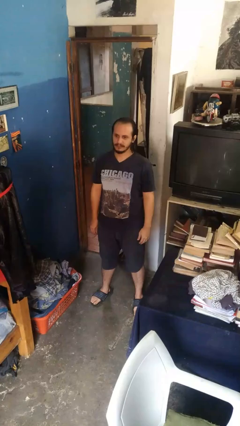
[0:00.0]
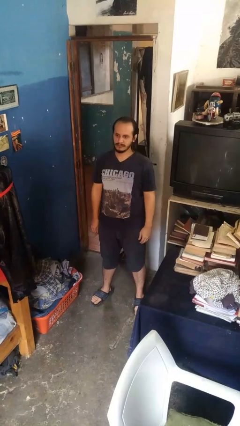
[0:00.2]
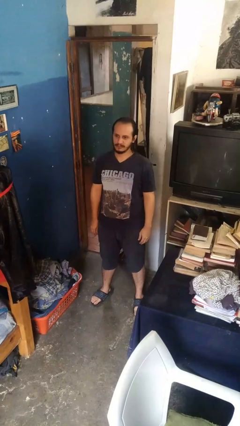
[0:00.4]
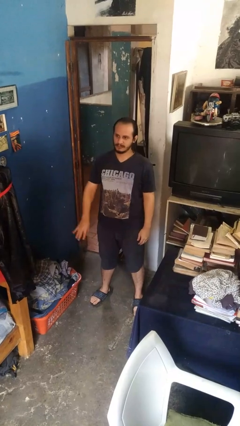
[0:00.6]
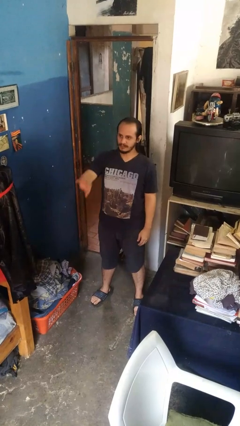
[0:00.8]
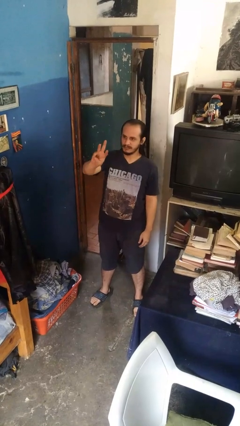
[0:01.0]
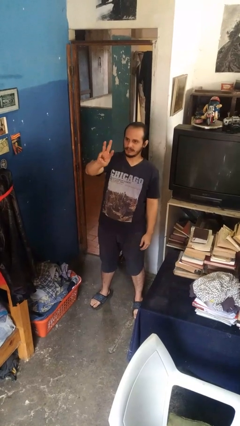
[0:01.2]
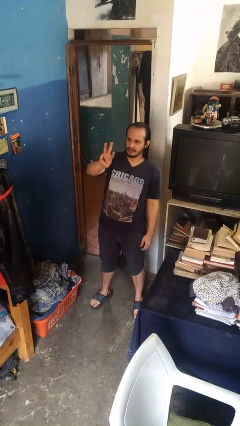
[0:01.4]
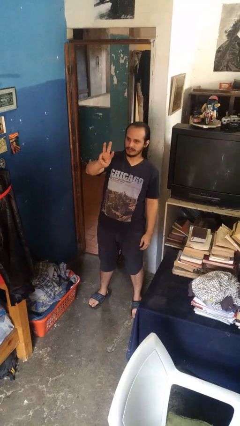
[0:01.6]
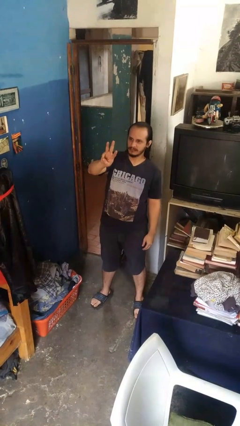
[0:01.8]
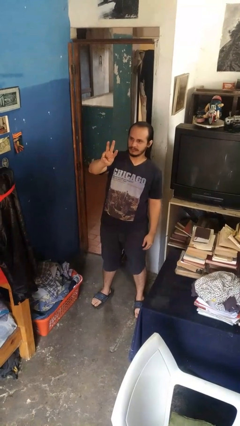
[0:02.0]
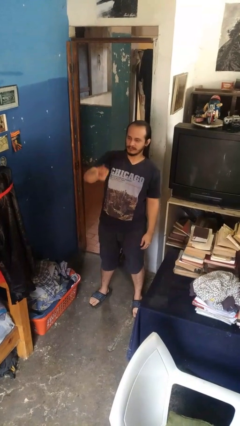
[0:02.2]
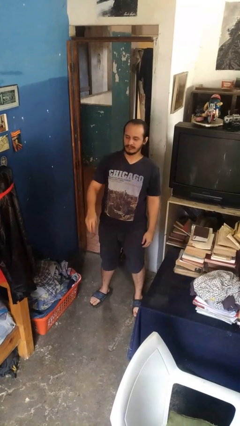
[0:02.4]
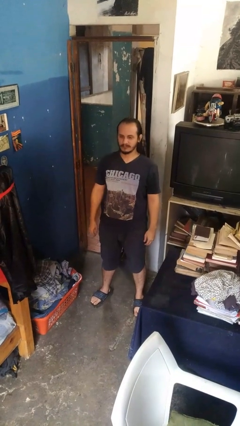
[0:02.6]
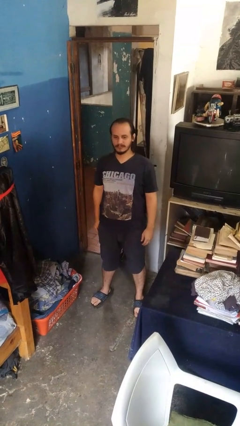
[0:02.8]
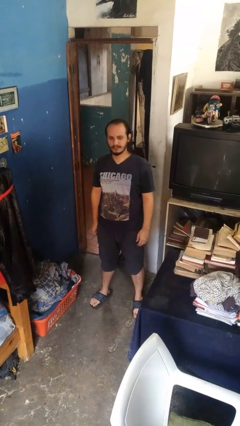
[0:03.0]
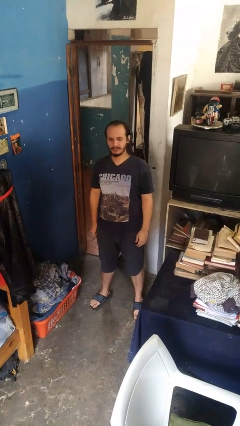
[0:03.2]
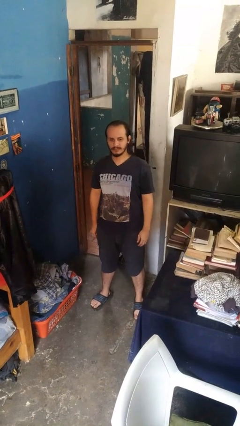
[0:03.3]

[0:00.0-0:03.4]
person gestures number three

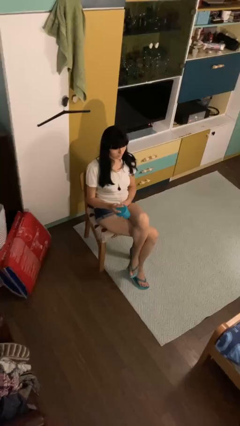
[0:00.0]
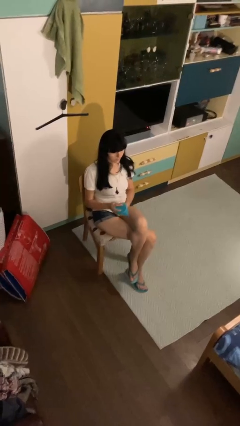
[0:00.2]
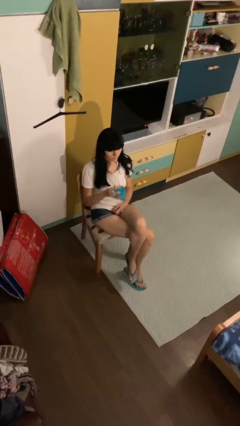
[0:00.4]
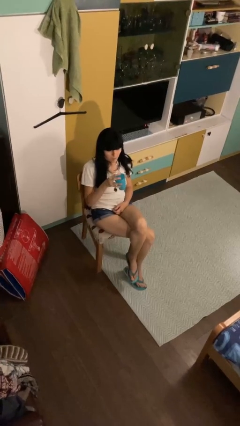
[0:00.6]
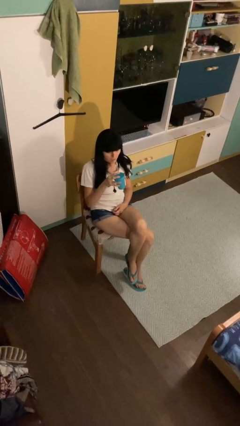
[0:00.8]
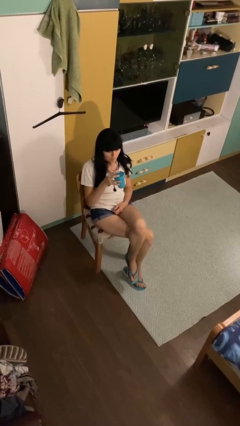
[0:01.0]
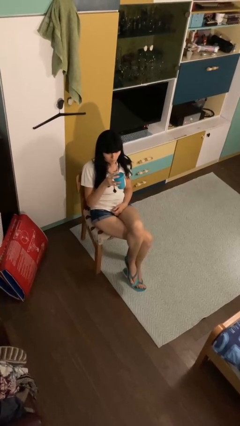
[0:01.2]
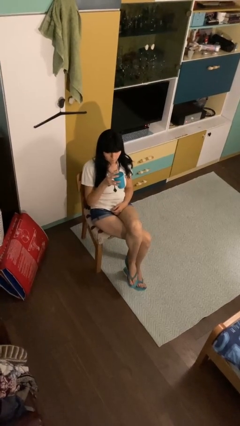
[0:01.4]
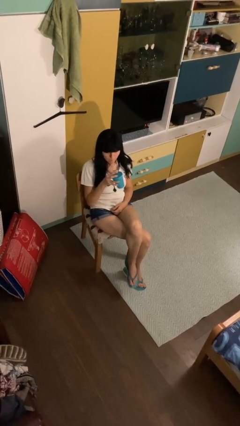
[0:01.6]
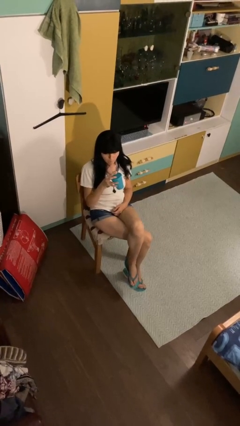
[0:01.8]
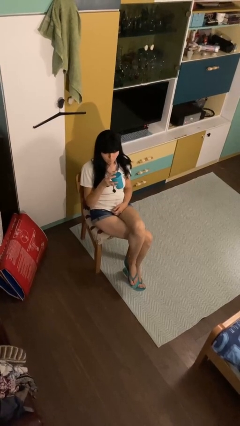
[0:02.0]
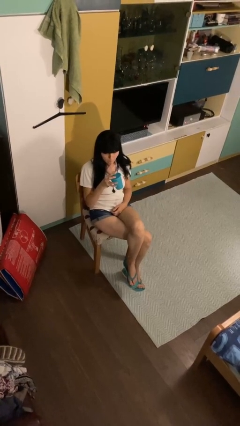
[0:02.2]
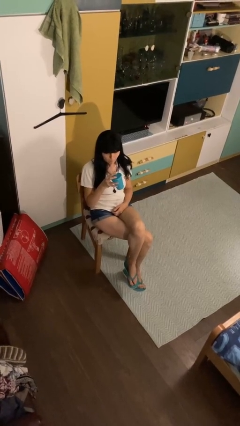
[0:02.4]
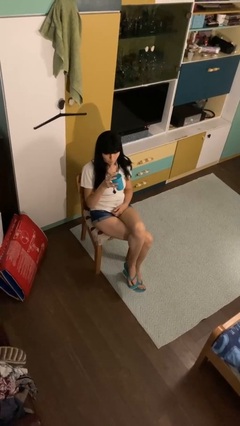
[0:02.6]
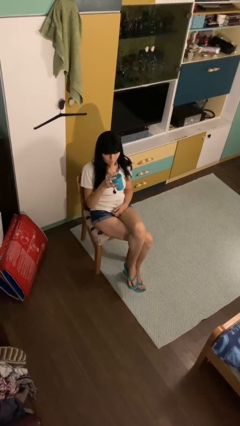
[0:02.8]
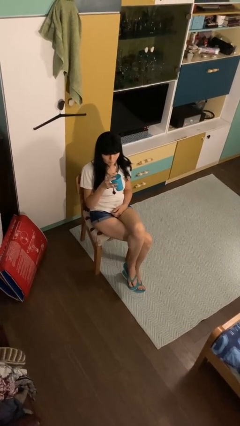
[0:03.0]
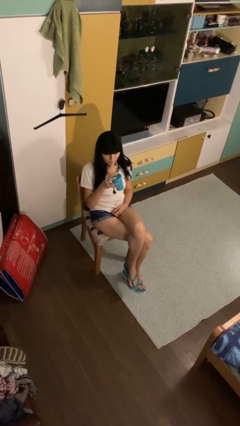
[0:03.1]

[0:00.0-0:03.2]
person drinks from straw

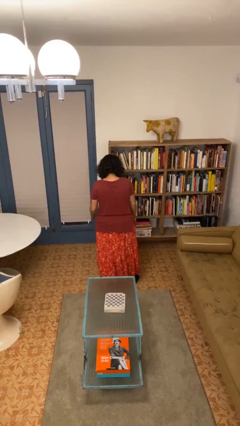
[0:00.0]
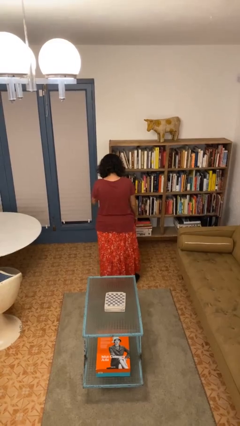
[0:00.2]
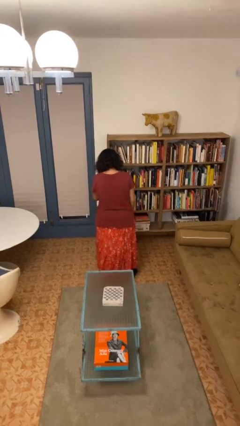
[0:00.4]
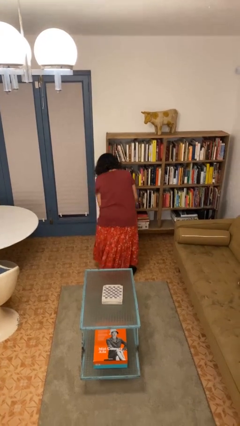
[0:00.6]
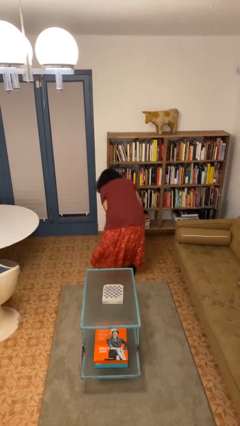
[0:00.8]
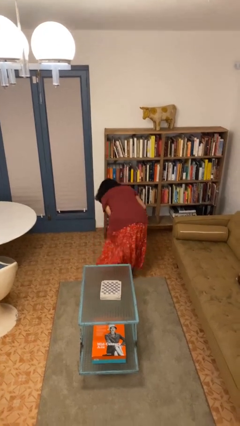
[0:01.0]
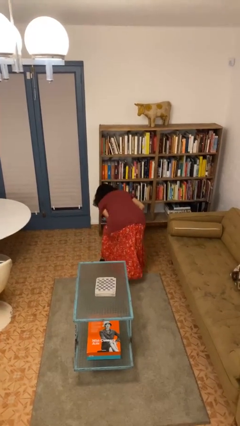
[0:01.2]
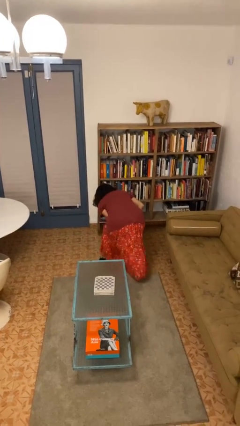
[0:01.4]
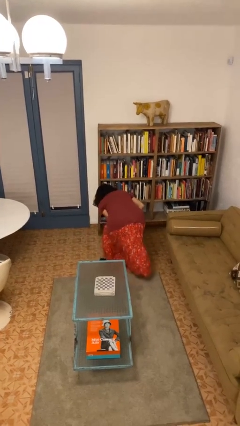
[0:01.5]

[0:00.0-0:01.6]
person squats

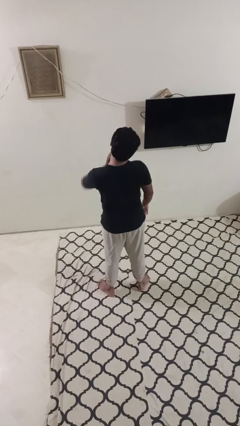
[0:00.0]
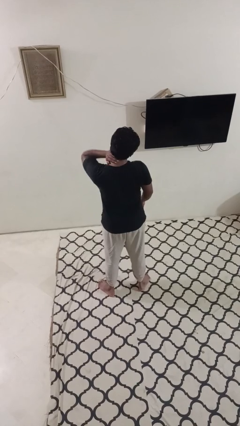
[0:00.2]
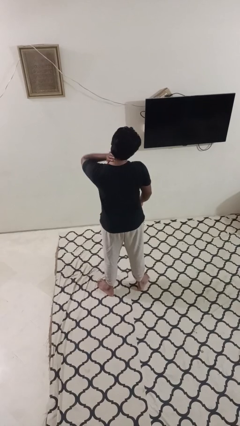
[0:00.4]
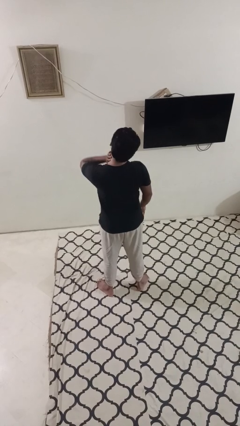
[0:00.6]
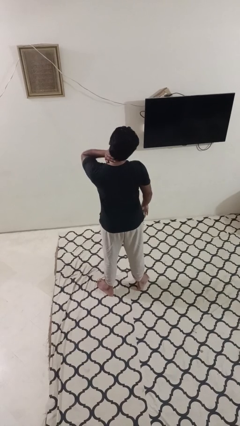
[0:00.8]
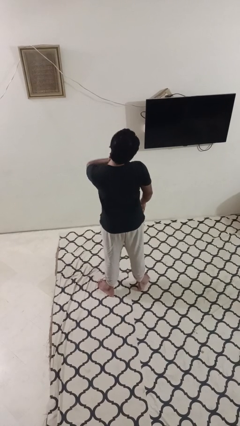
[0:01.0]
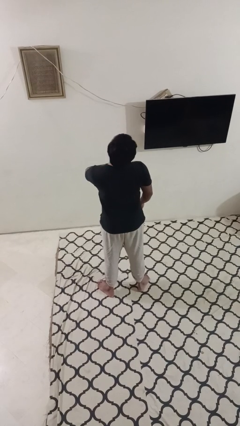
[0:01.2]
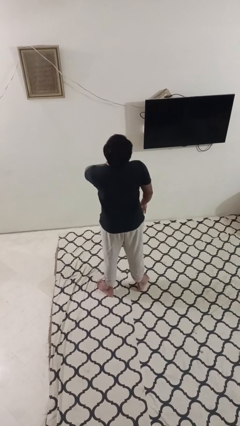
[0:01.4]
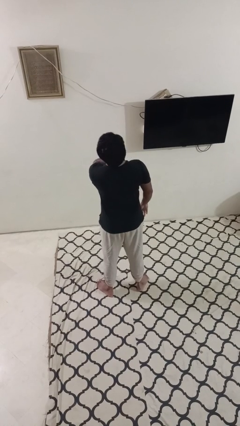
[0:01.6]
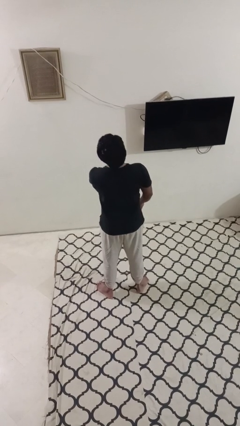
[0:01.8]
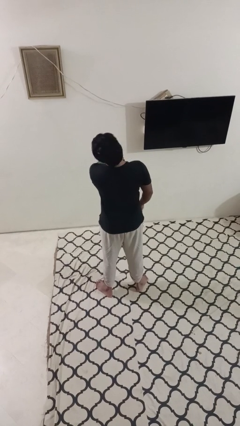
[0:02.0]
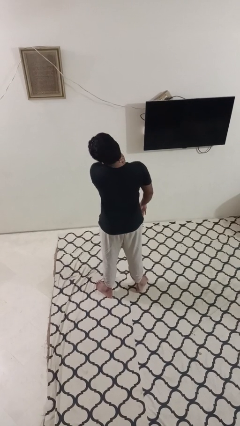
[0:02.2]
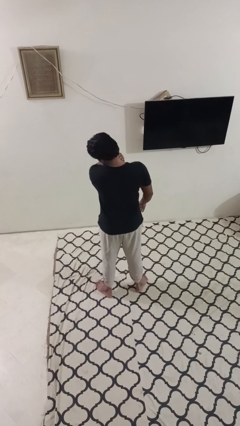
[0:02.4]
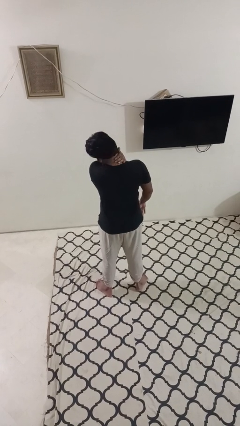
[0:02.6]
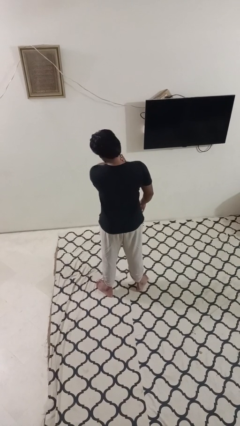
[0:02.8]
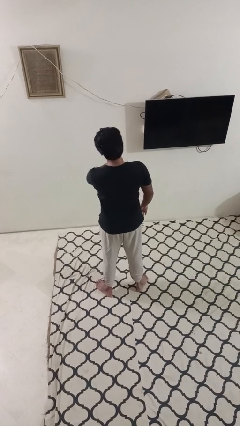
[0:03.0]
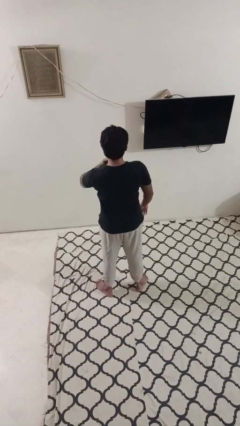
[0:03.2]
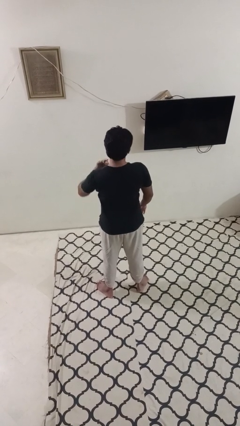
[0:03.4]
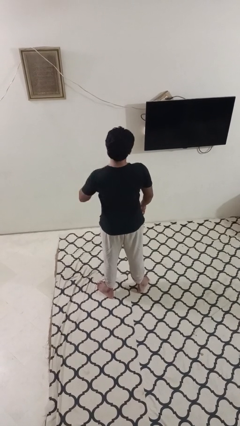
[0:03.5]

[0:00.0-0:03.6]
person rubs neck

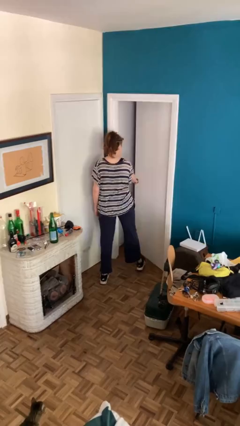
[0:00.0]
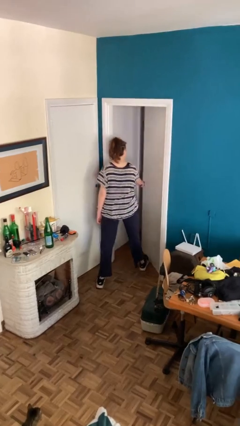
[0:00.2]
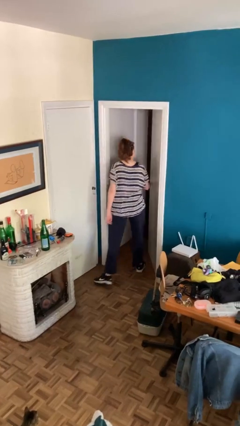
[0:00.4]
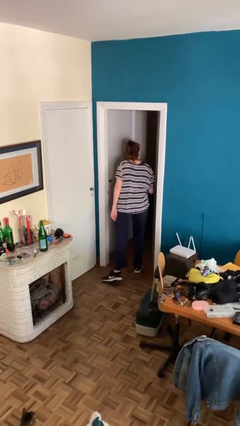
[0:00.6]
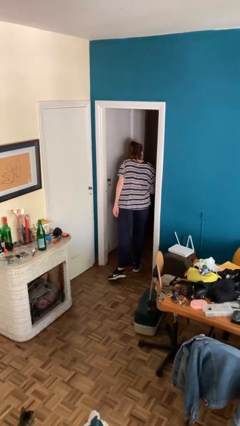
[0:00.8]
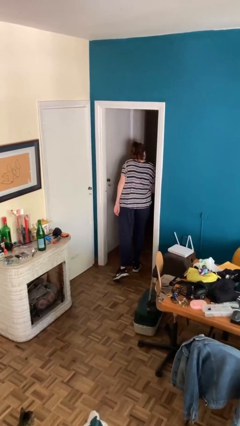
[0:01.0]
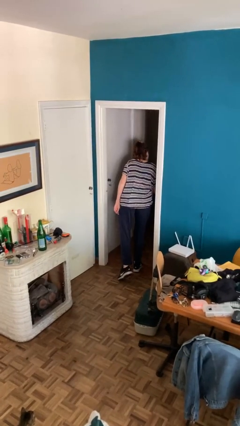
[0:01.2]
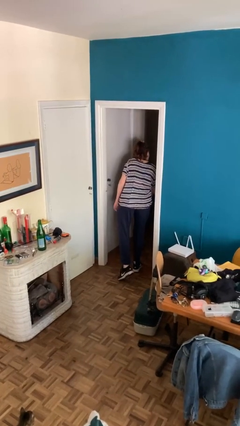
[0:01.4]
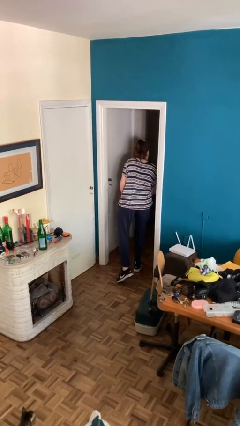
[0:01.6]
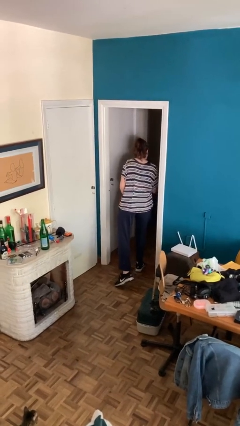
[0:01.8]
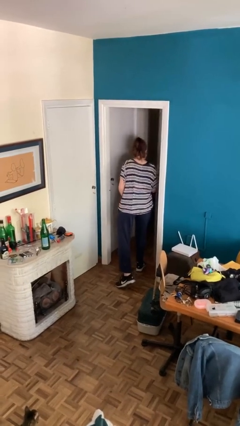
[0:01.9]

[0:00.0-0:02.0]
person opens facility door

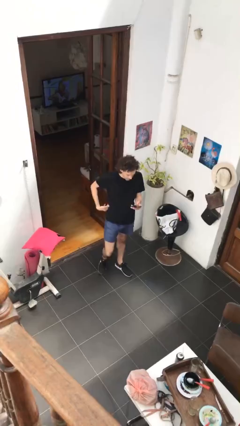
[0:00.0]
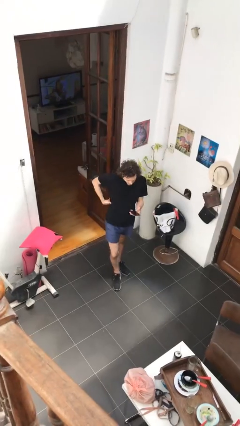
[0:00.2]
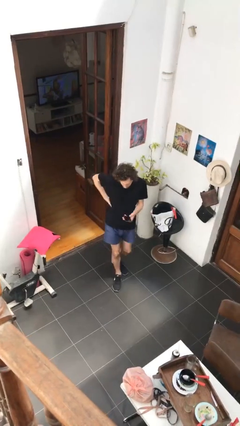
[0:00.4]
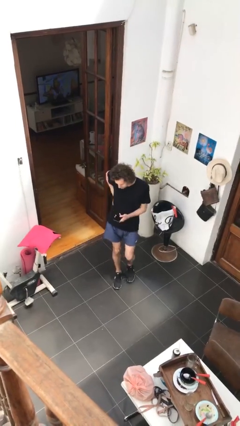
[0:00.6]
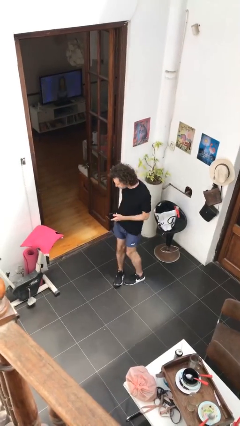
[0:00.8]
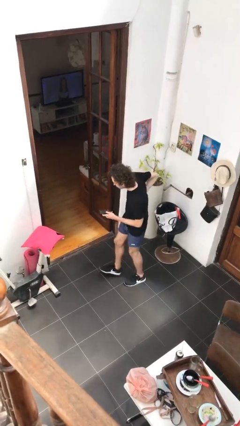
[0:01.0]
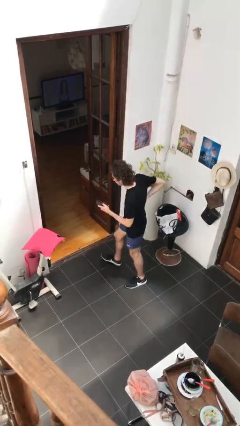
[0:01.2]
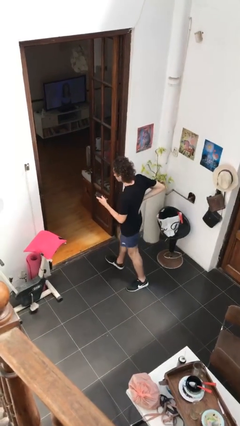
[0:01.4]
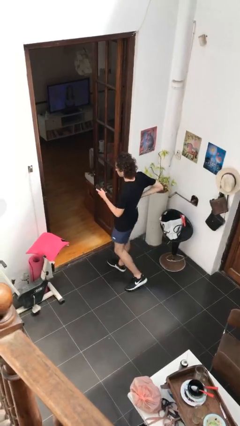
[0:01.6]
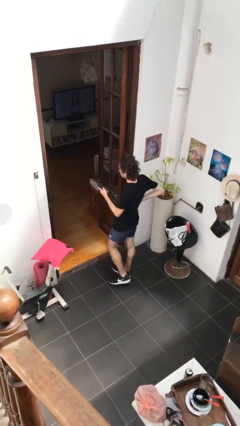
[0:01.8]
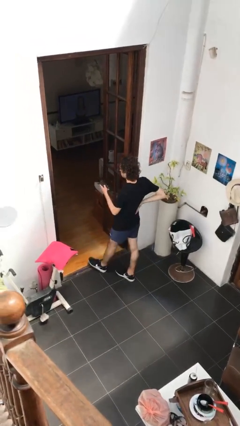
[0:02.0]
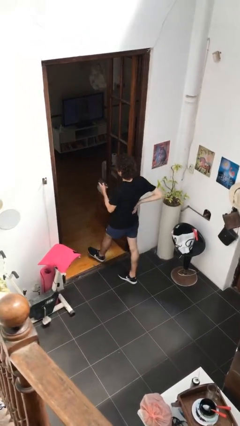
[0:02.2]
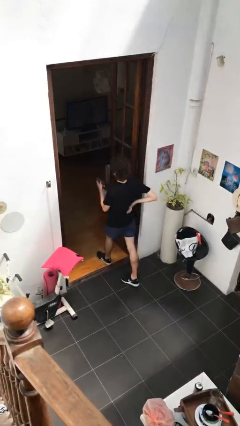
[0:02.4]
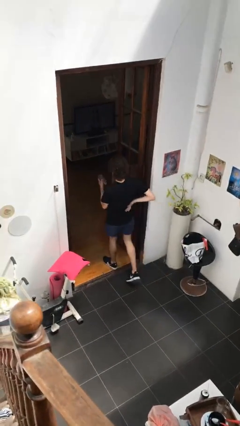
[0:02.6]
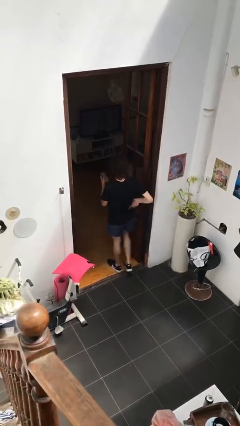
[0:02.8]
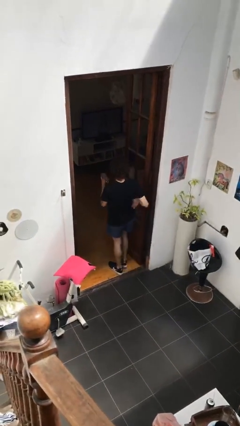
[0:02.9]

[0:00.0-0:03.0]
person exits scene through structure

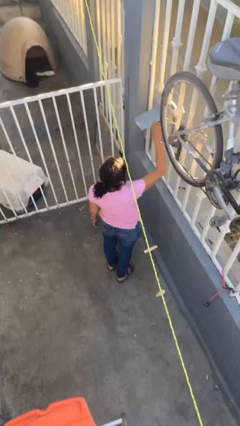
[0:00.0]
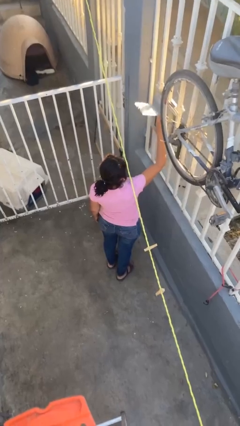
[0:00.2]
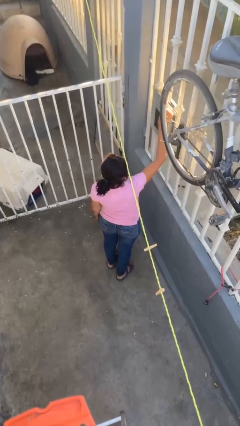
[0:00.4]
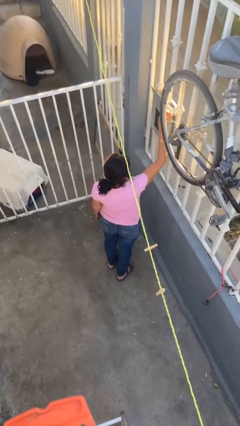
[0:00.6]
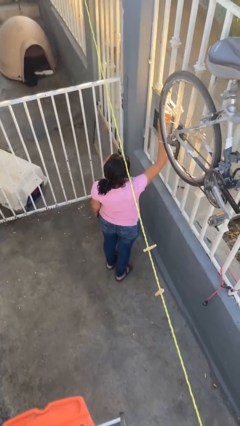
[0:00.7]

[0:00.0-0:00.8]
person opens mailbox
